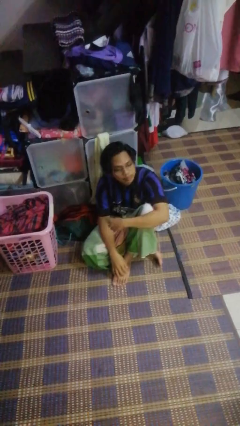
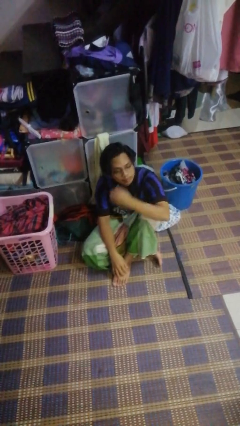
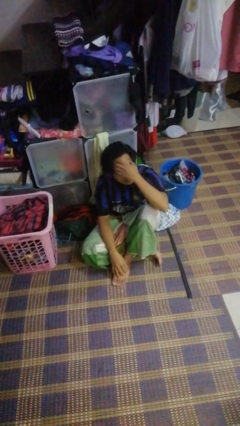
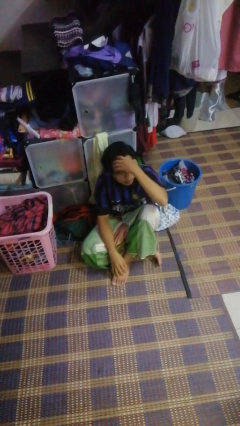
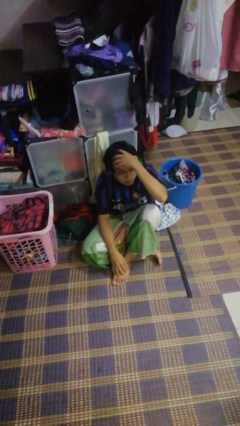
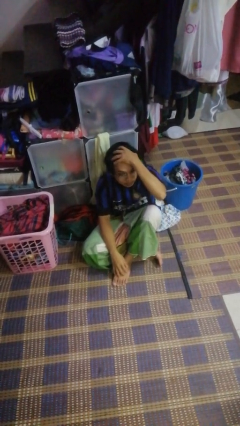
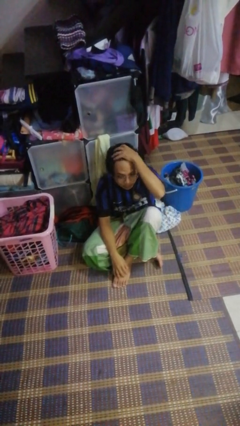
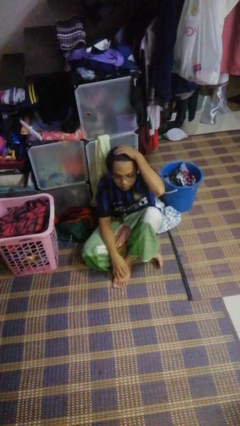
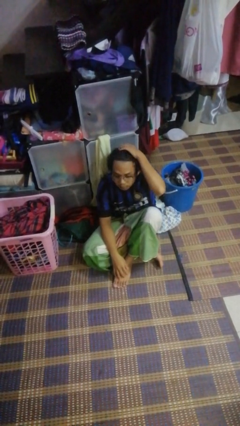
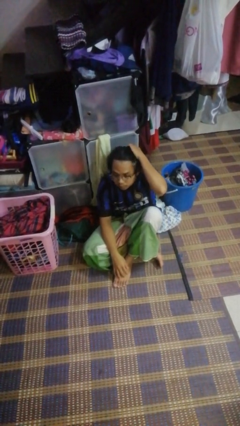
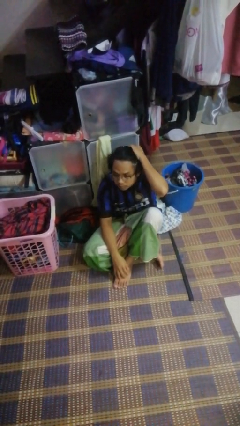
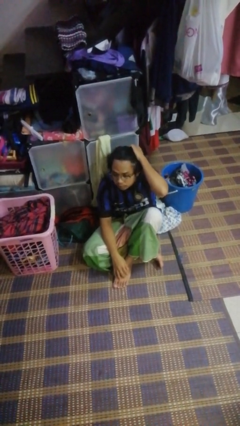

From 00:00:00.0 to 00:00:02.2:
person strokes hair

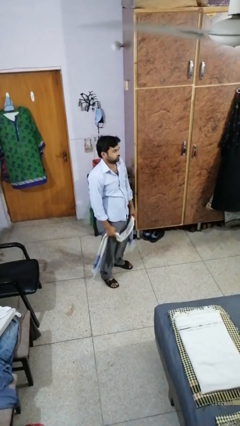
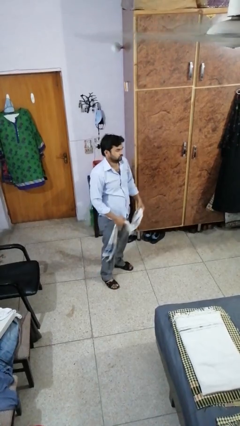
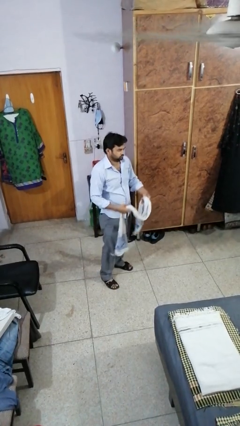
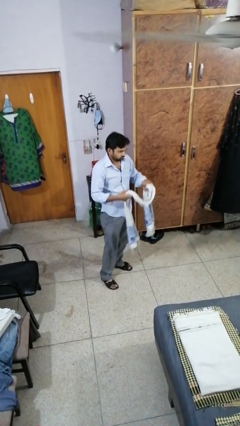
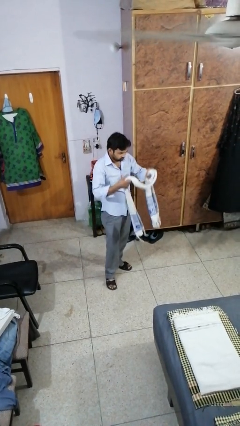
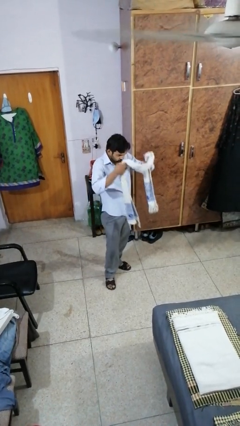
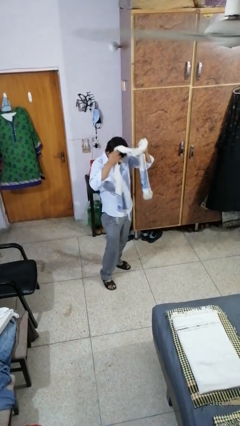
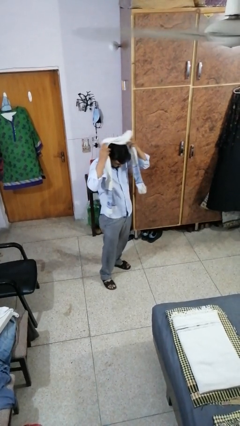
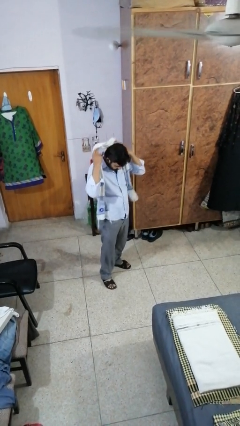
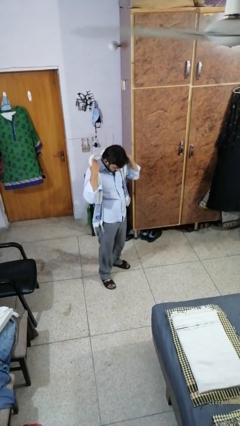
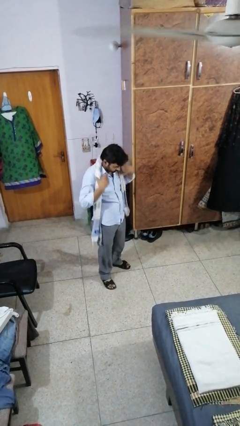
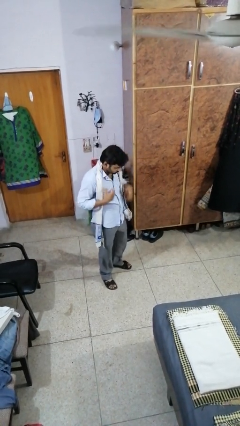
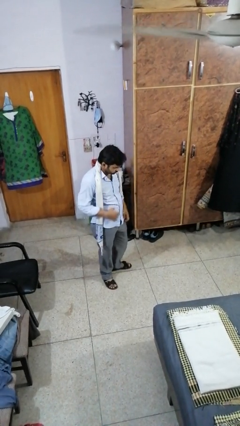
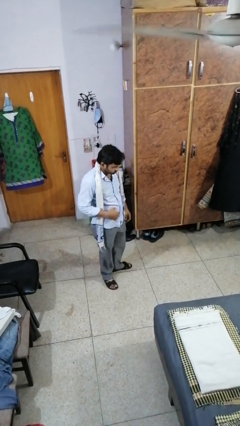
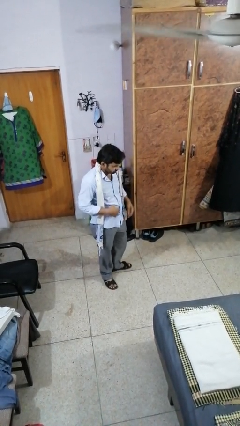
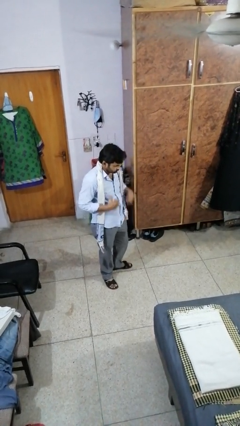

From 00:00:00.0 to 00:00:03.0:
person puts on scarf

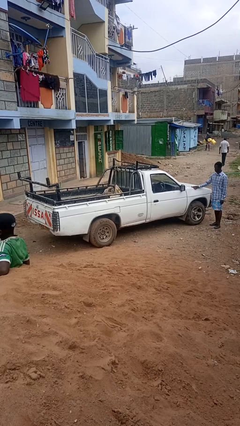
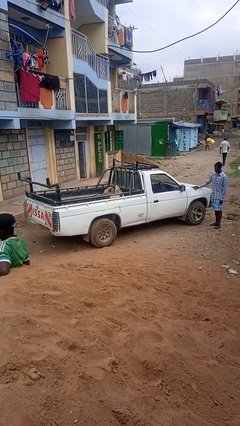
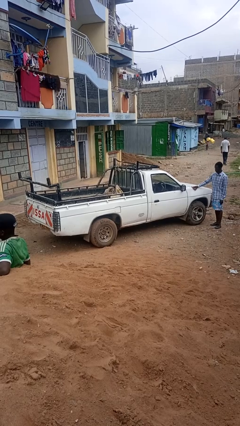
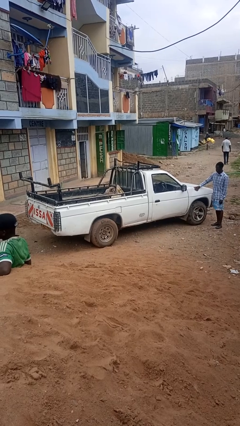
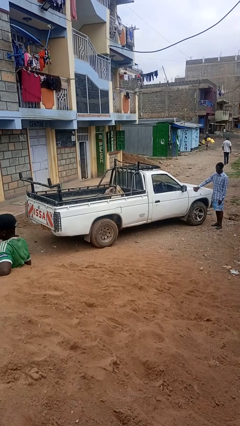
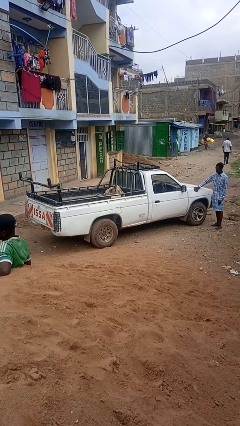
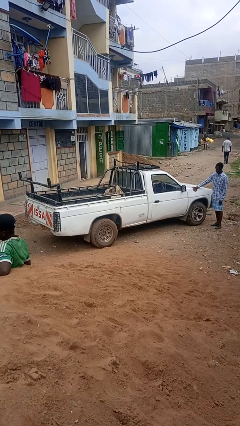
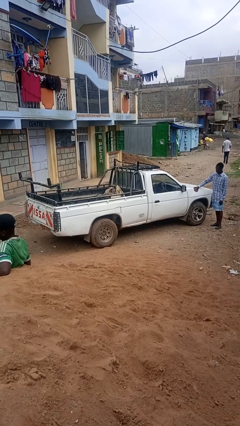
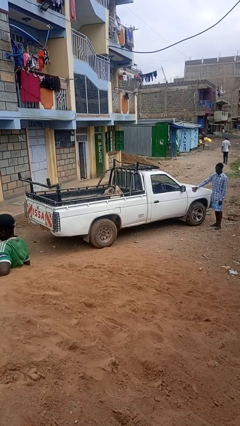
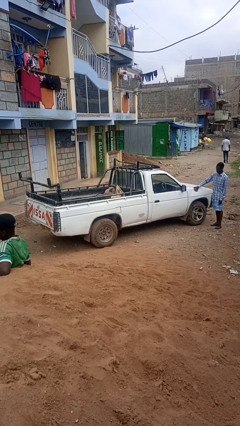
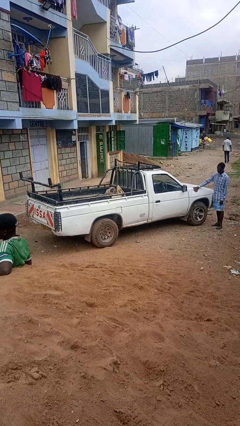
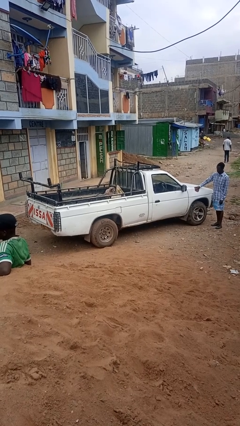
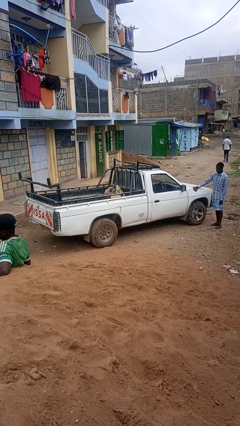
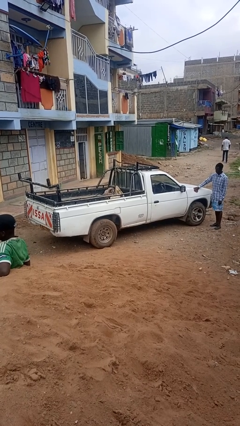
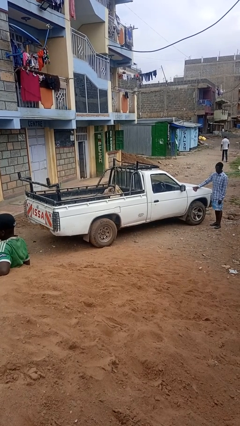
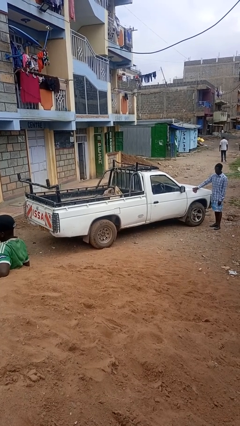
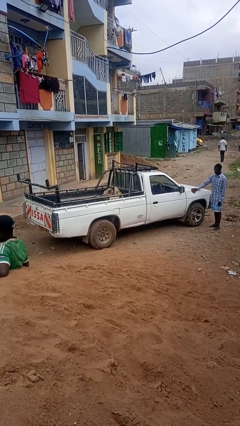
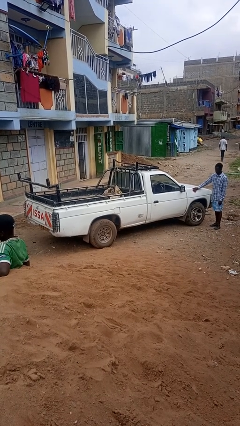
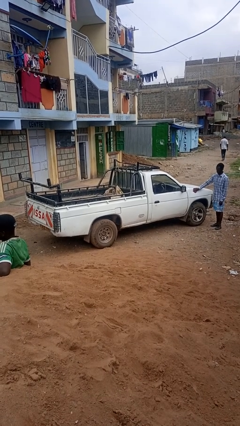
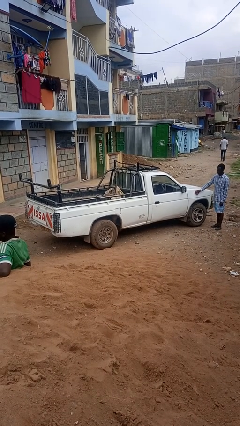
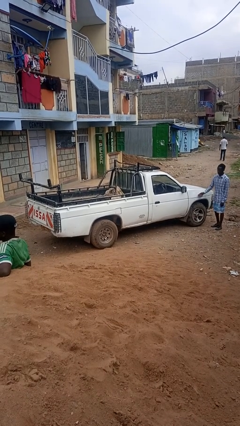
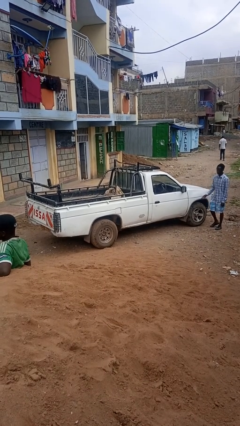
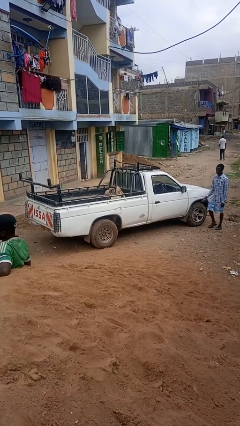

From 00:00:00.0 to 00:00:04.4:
person polishes car with rag

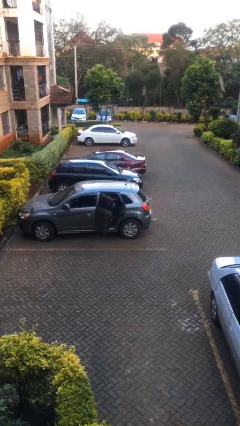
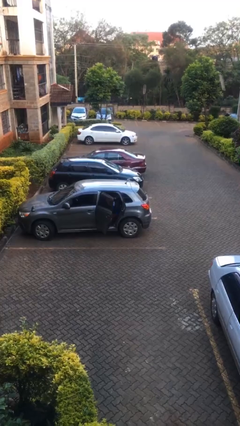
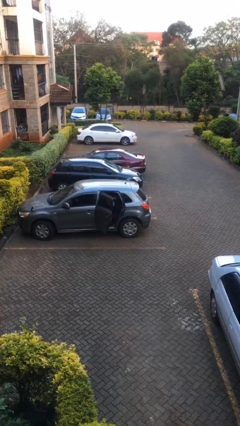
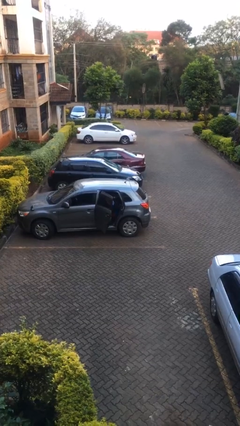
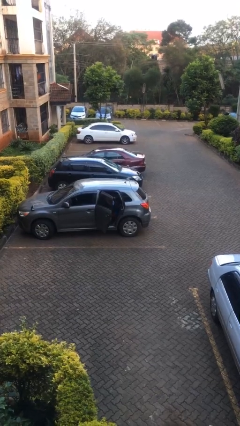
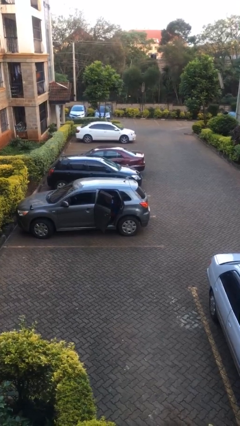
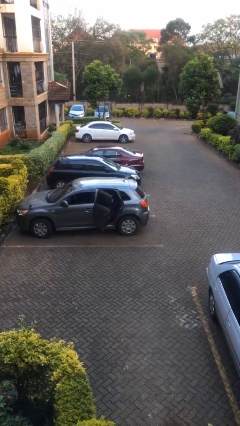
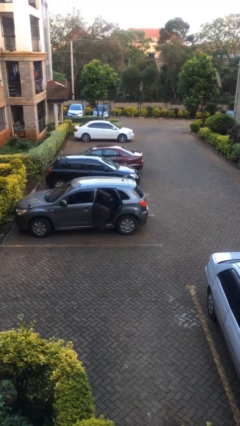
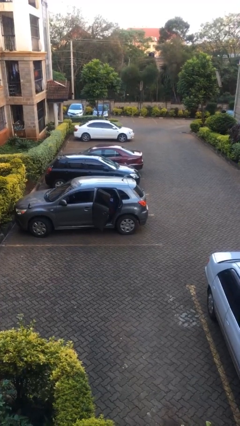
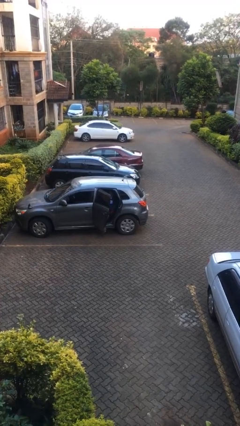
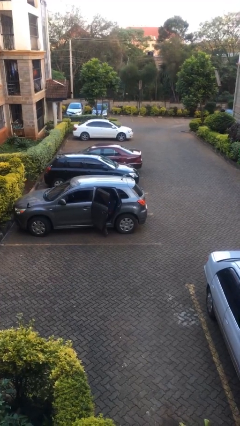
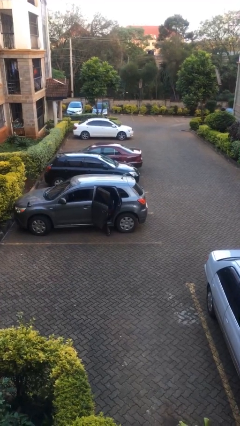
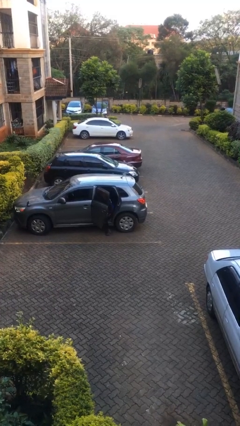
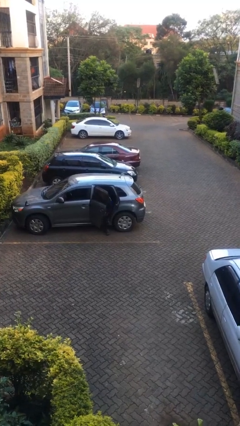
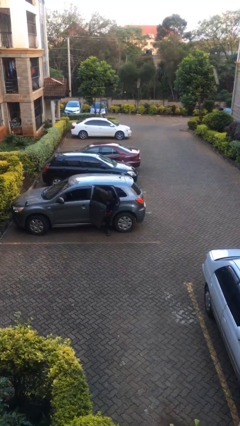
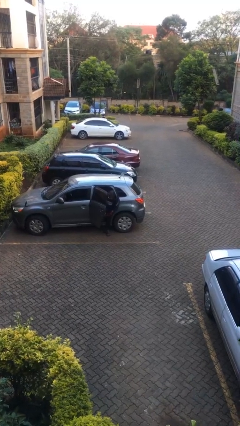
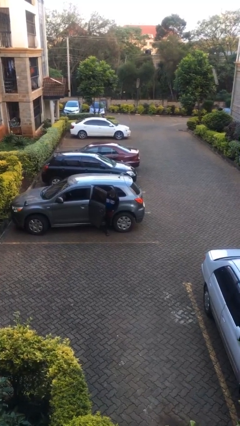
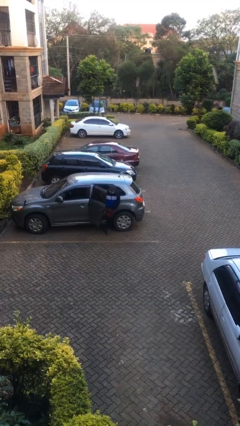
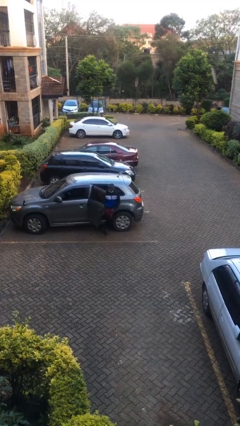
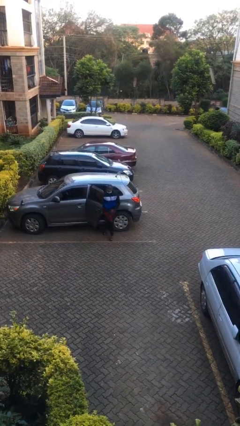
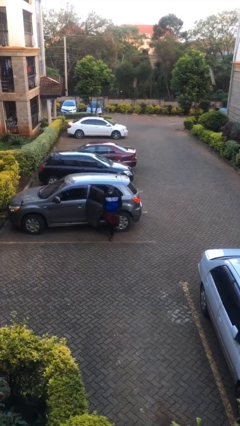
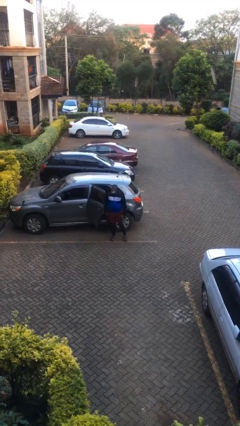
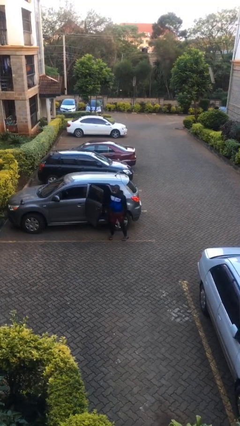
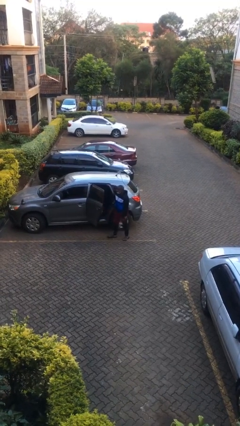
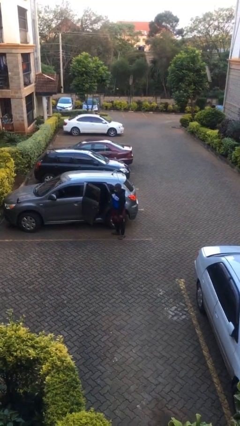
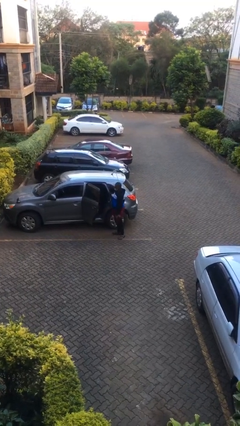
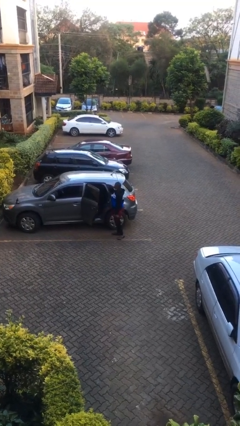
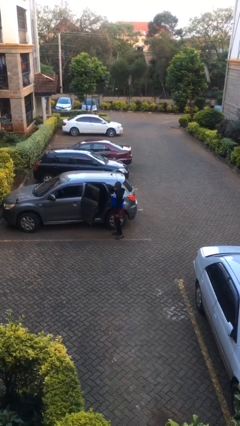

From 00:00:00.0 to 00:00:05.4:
person exits car

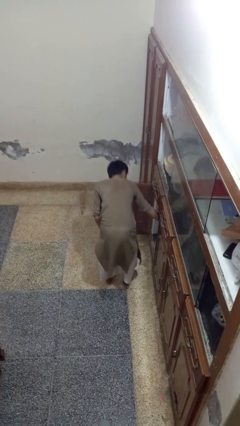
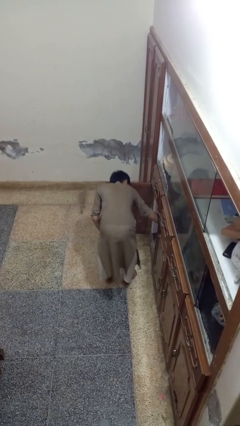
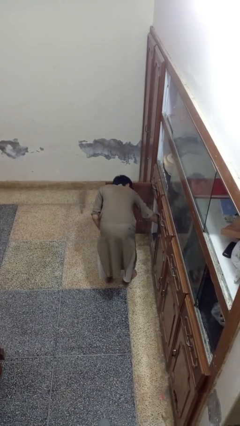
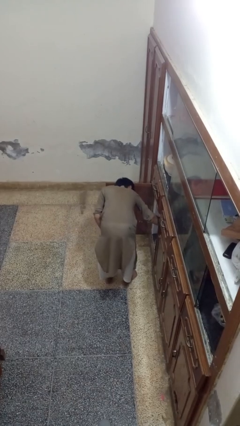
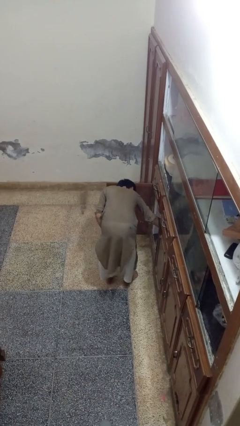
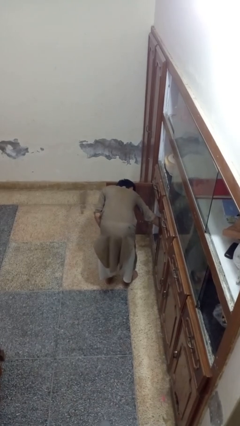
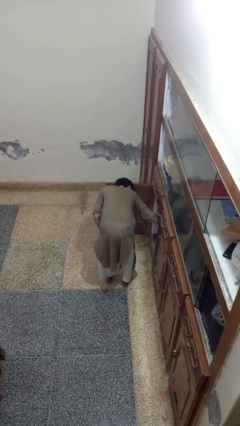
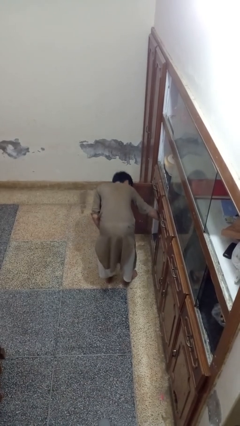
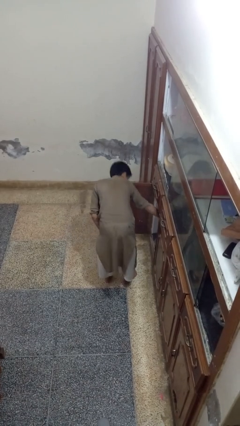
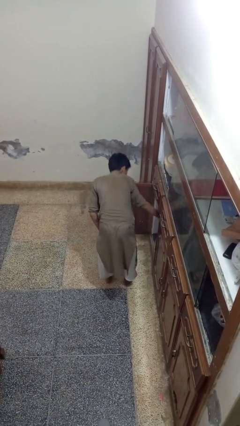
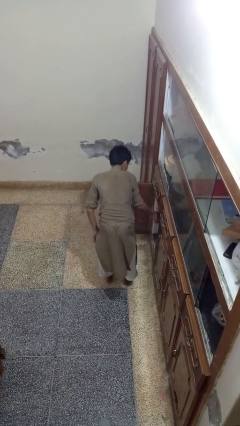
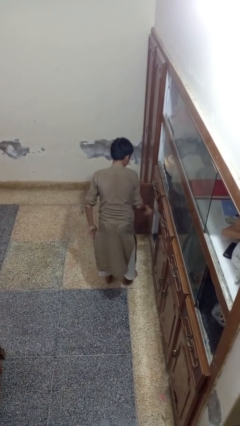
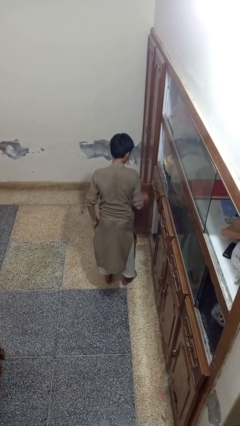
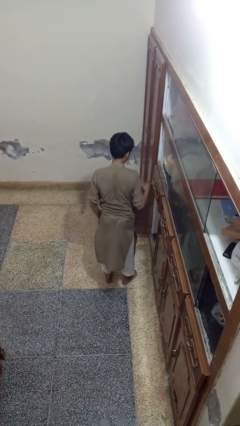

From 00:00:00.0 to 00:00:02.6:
person takes object from cabinet
